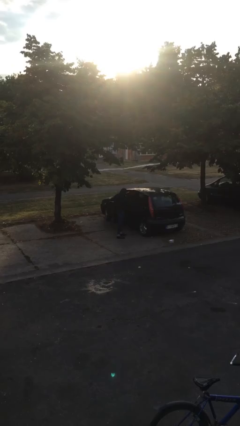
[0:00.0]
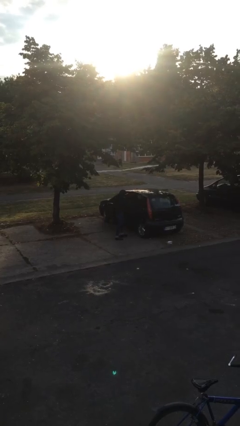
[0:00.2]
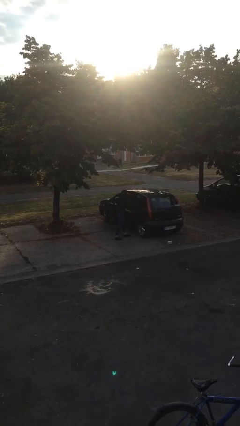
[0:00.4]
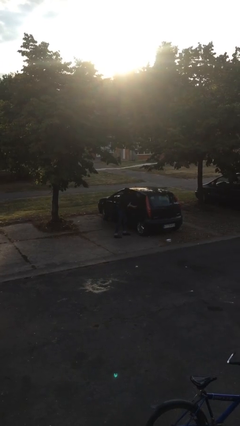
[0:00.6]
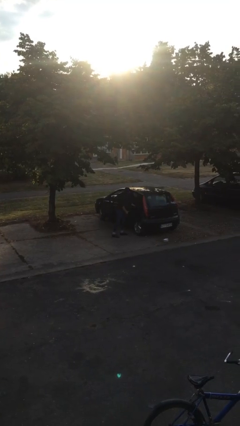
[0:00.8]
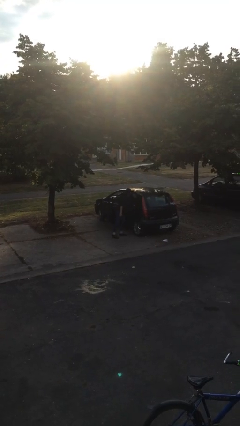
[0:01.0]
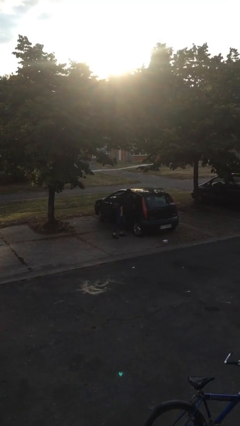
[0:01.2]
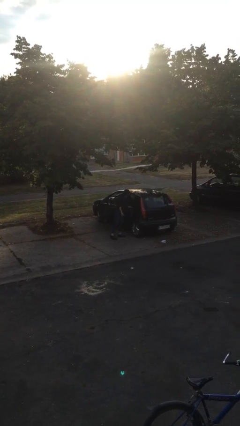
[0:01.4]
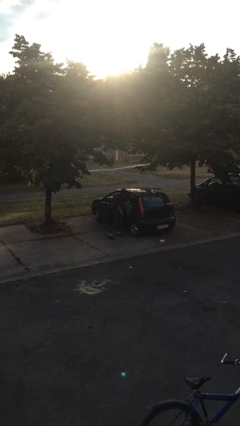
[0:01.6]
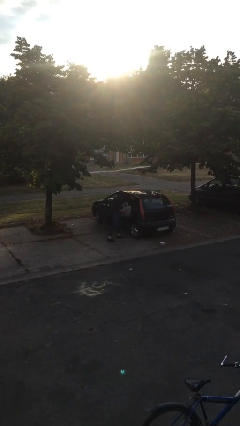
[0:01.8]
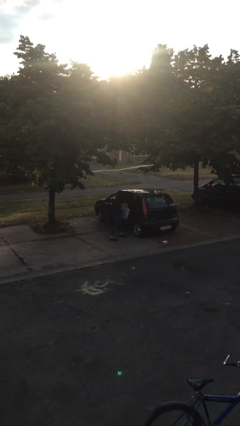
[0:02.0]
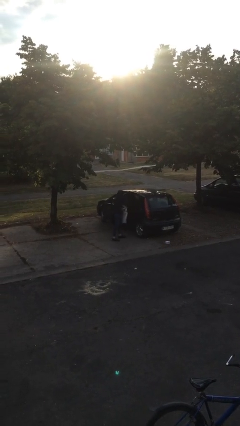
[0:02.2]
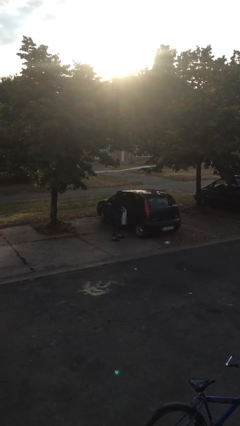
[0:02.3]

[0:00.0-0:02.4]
person unloads car

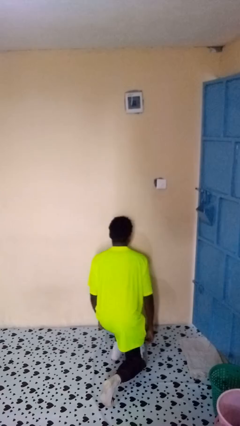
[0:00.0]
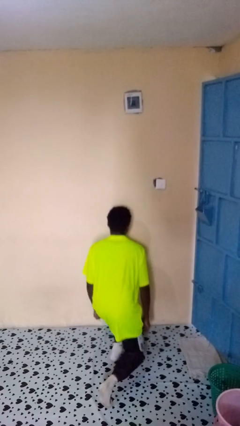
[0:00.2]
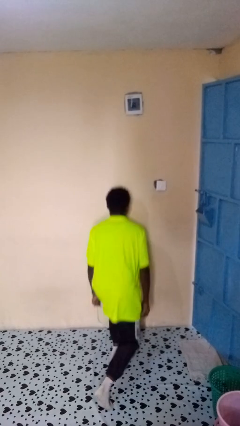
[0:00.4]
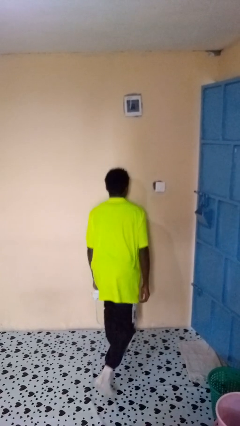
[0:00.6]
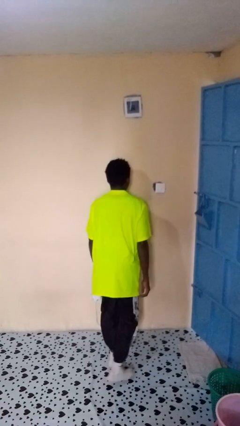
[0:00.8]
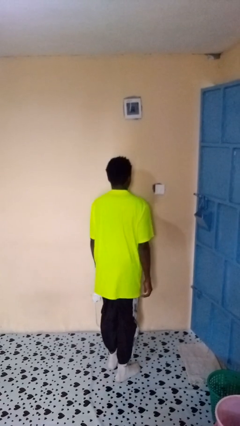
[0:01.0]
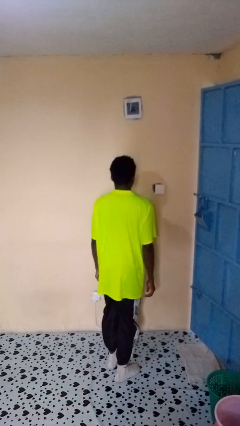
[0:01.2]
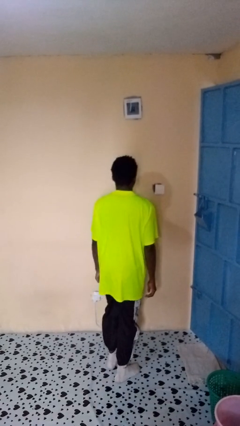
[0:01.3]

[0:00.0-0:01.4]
person stands up from floor

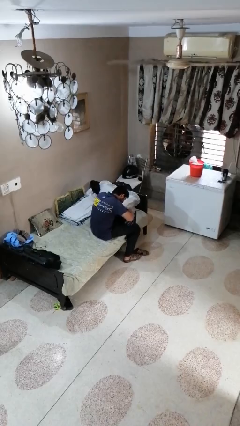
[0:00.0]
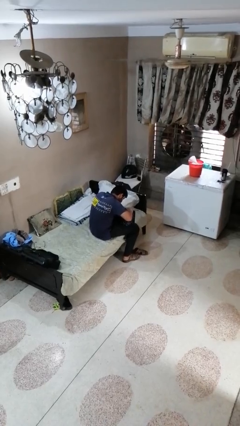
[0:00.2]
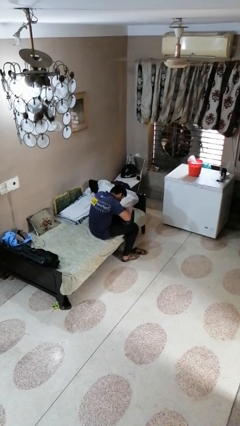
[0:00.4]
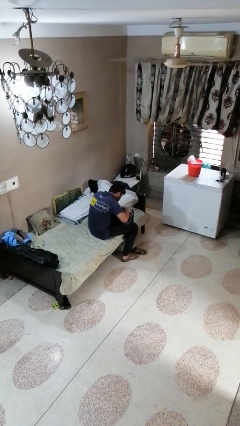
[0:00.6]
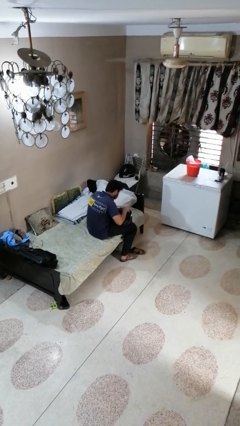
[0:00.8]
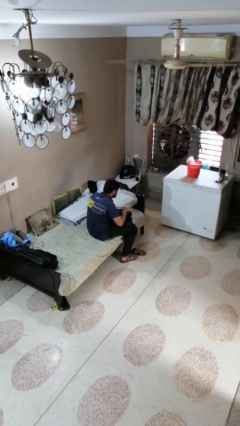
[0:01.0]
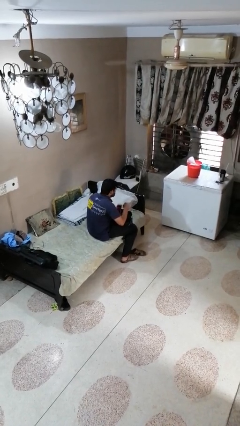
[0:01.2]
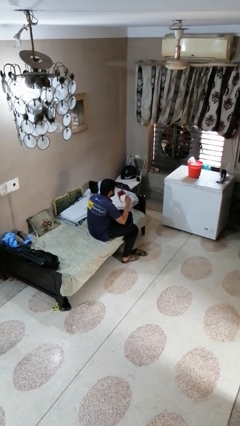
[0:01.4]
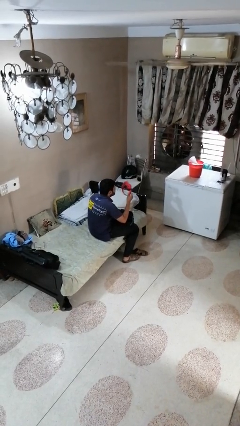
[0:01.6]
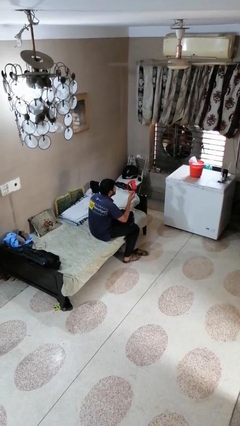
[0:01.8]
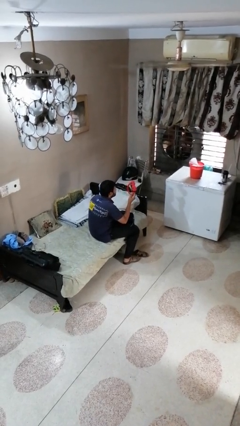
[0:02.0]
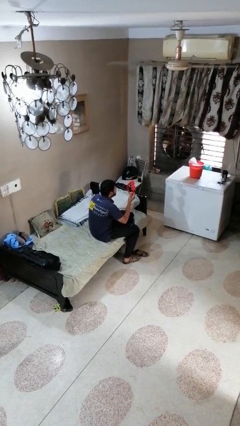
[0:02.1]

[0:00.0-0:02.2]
person takes object from purse

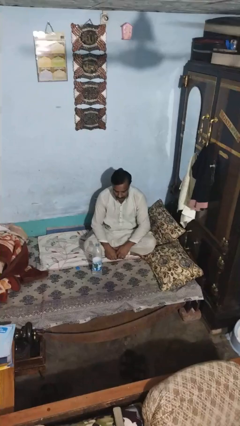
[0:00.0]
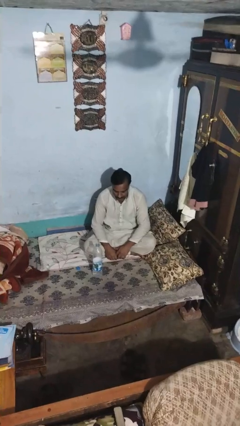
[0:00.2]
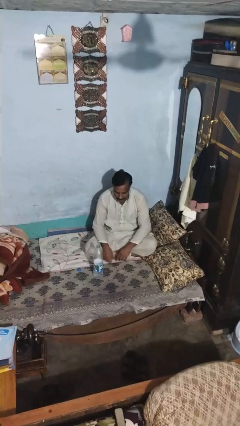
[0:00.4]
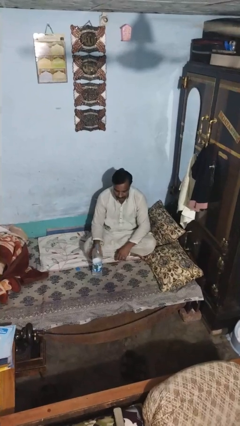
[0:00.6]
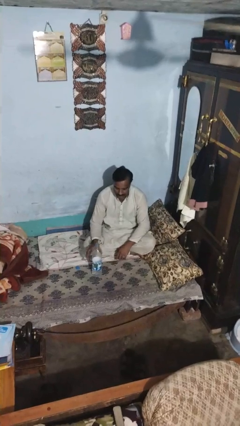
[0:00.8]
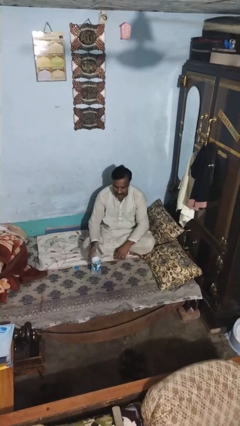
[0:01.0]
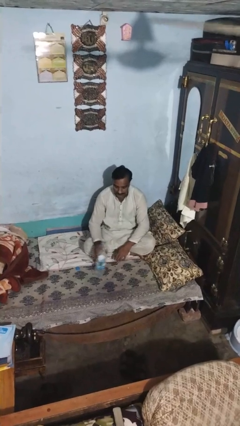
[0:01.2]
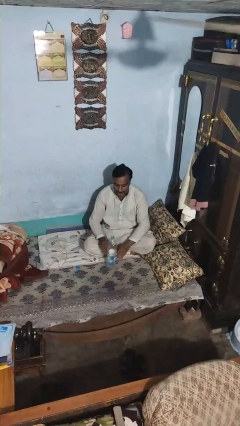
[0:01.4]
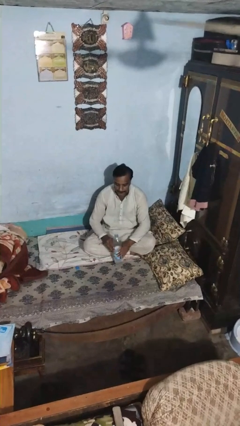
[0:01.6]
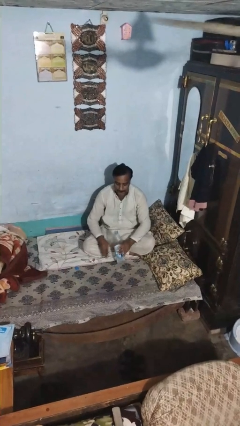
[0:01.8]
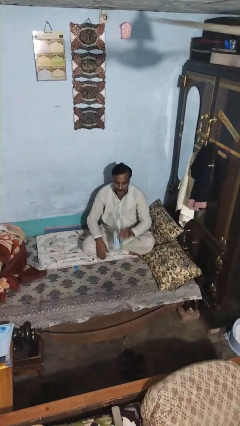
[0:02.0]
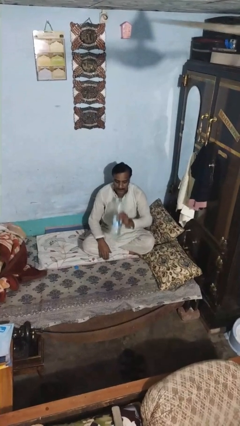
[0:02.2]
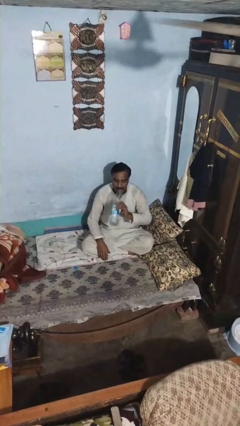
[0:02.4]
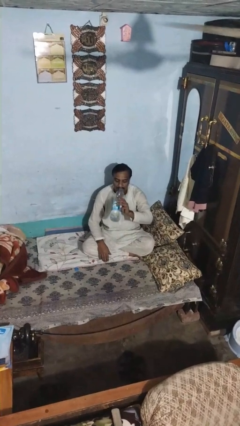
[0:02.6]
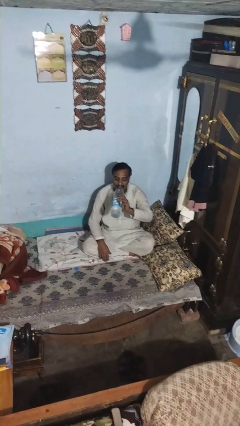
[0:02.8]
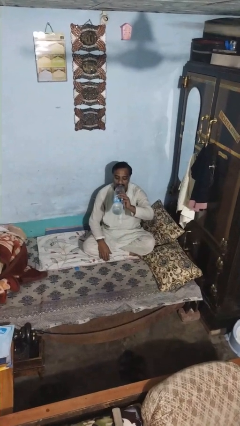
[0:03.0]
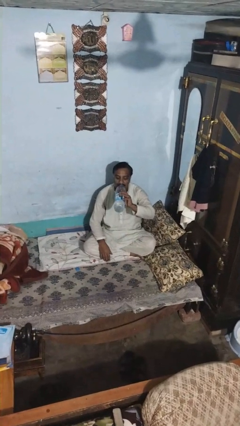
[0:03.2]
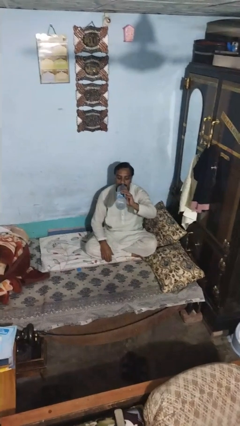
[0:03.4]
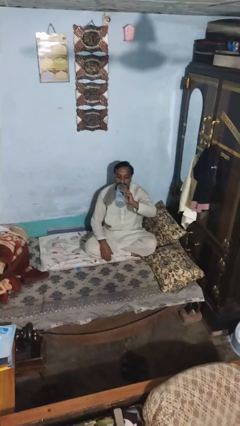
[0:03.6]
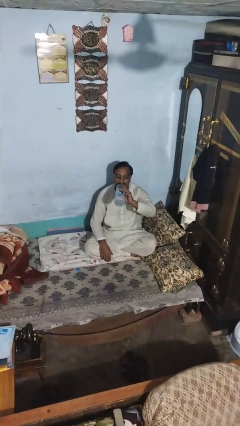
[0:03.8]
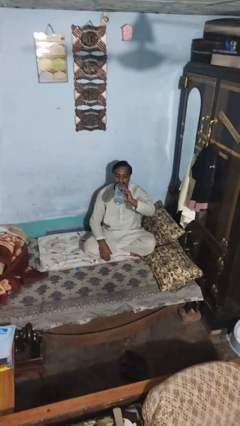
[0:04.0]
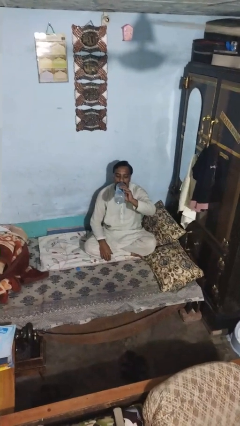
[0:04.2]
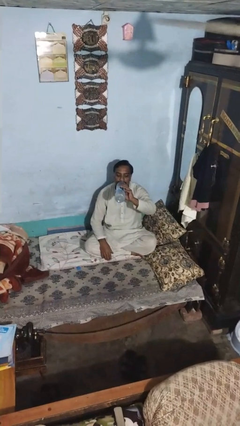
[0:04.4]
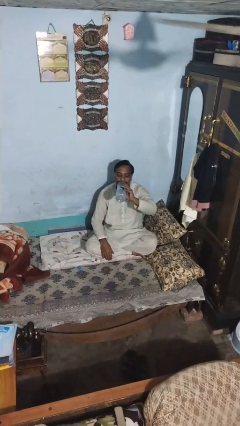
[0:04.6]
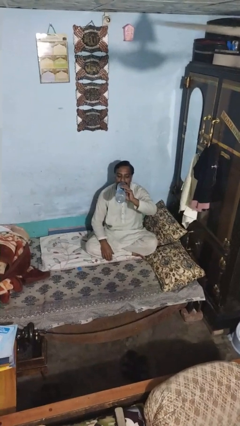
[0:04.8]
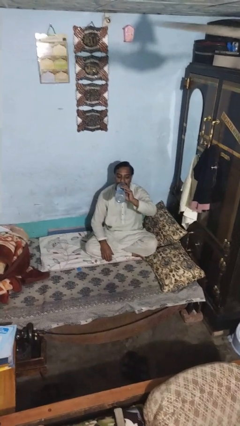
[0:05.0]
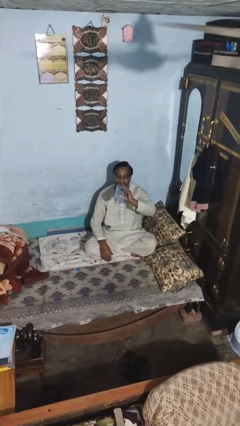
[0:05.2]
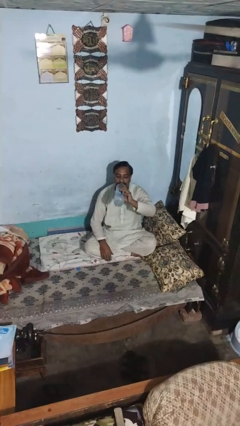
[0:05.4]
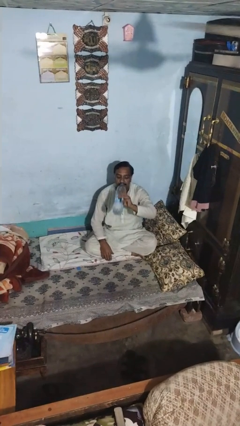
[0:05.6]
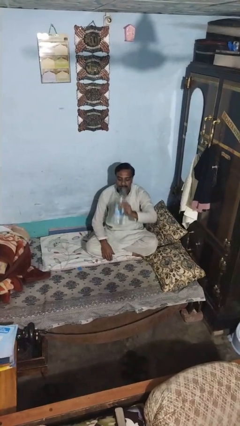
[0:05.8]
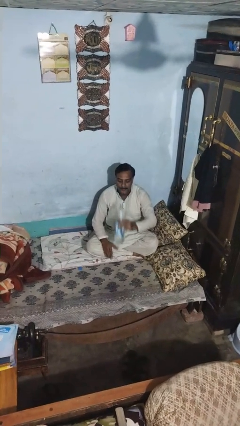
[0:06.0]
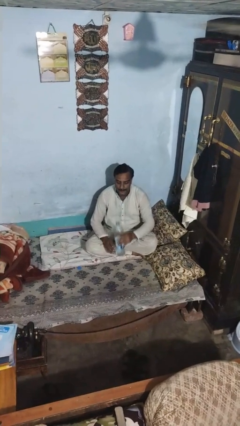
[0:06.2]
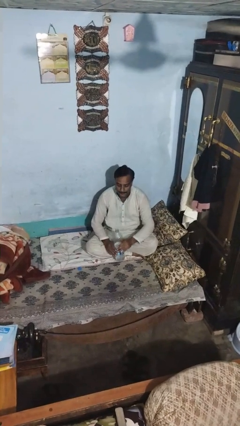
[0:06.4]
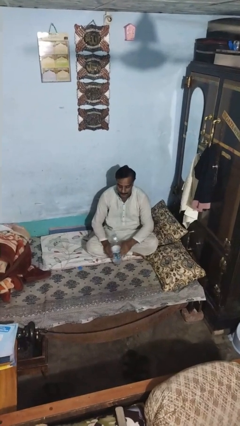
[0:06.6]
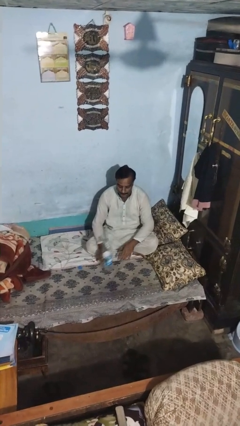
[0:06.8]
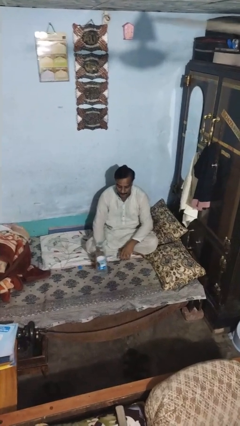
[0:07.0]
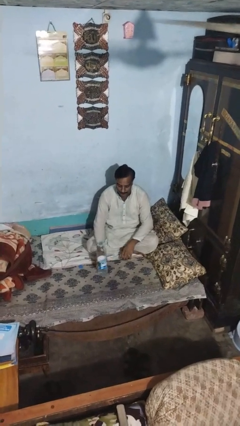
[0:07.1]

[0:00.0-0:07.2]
person drinks from bottle

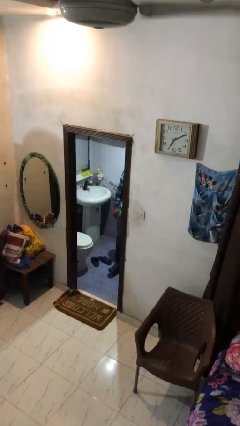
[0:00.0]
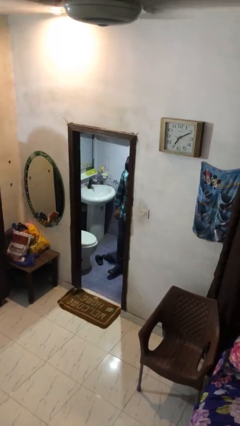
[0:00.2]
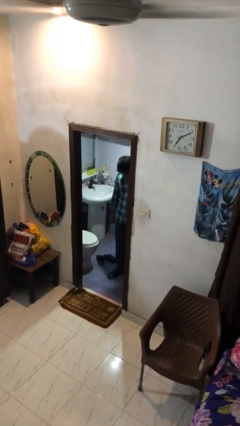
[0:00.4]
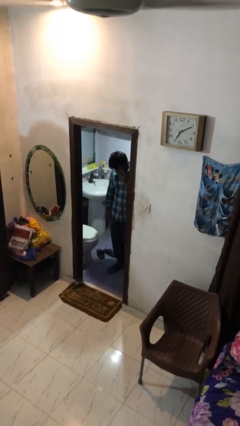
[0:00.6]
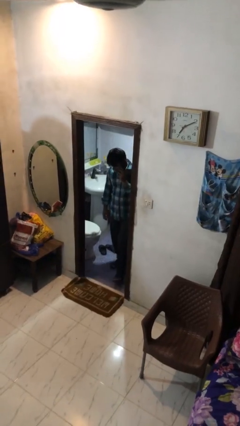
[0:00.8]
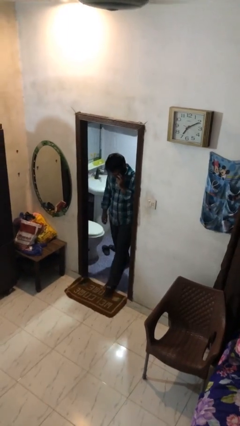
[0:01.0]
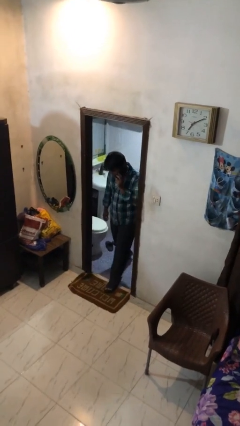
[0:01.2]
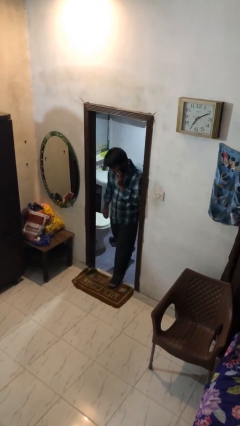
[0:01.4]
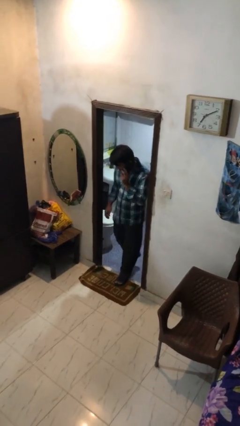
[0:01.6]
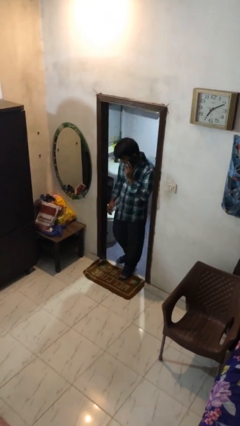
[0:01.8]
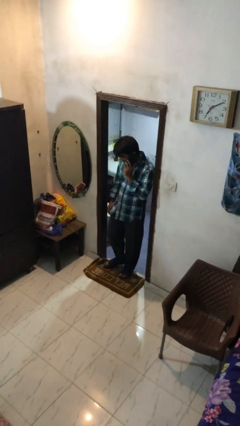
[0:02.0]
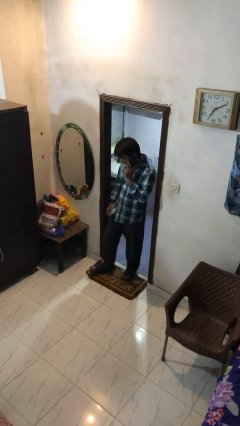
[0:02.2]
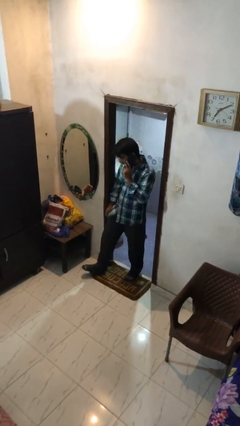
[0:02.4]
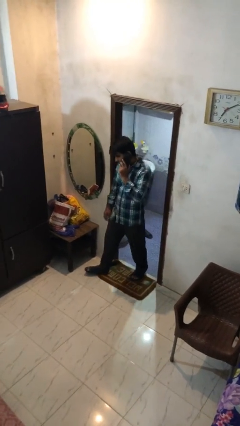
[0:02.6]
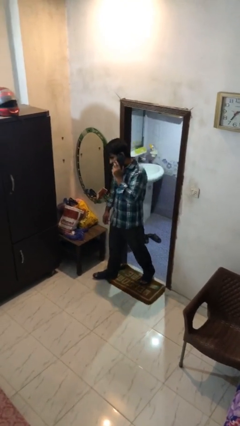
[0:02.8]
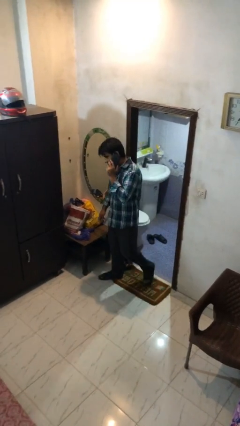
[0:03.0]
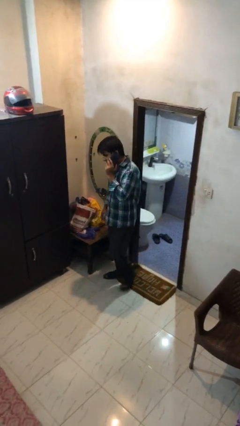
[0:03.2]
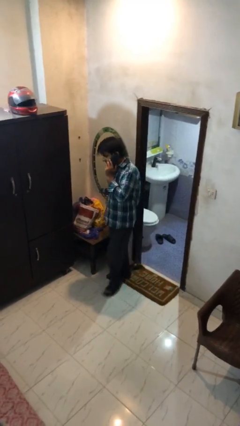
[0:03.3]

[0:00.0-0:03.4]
person enters scene through structure

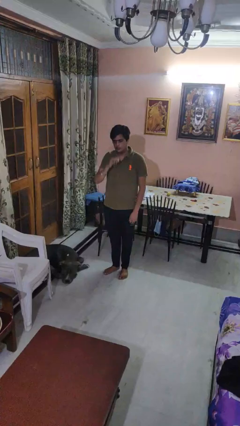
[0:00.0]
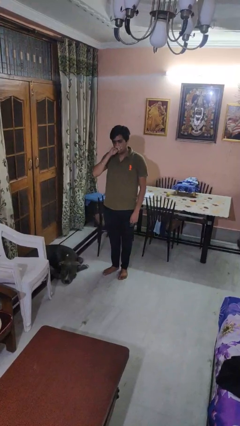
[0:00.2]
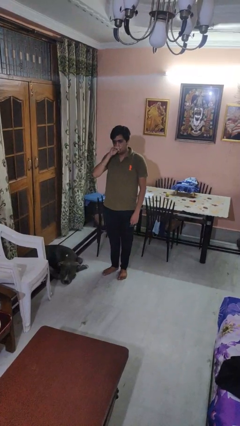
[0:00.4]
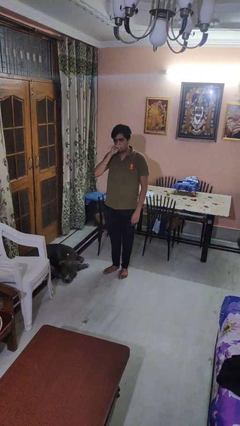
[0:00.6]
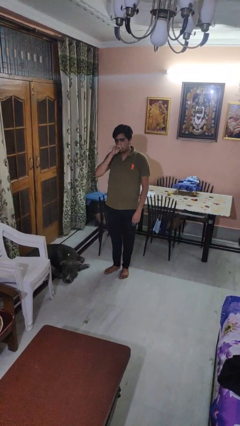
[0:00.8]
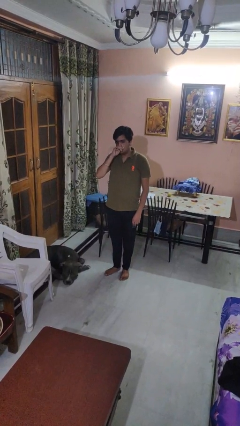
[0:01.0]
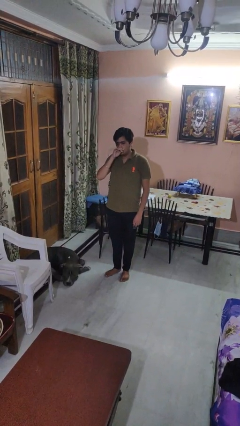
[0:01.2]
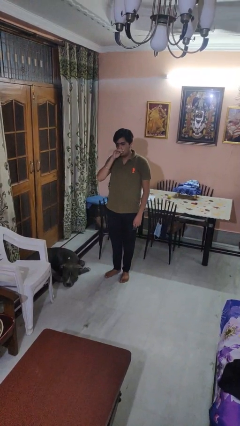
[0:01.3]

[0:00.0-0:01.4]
person vapes
